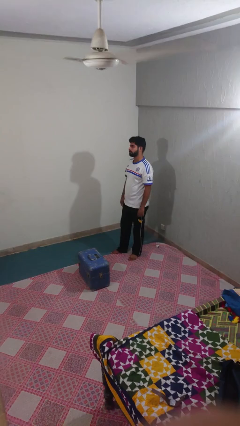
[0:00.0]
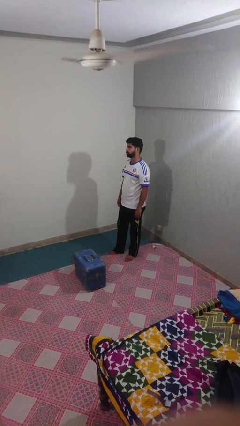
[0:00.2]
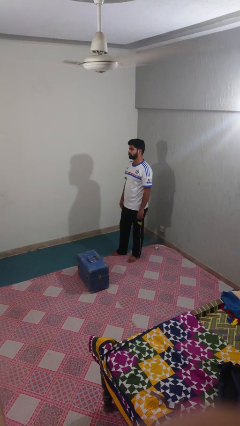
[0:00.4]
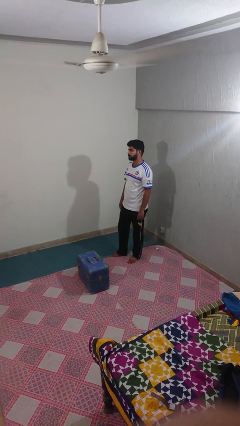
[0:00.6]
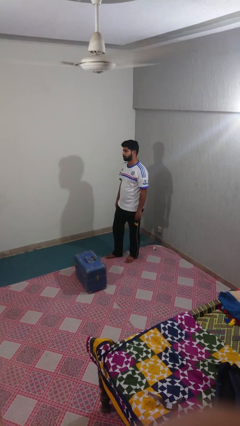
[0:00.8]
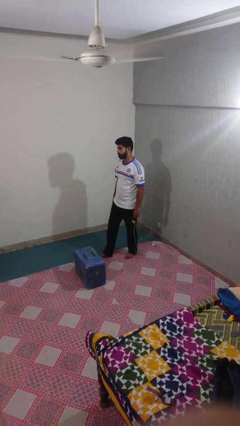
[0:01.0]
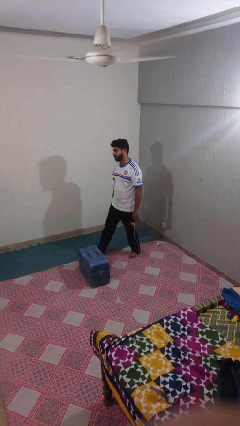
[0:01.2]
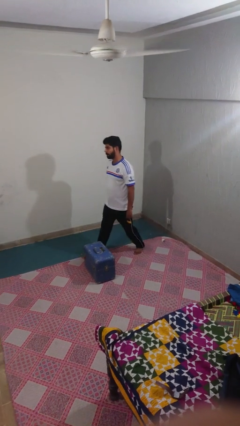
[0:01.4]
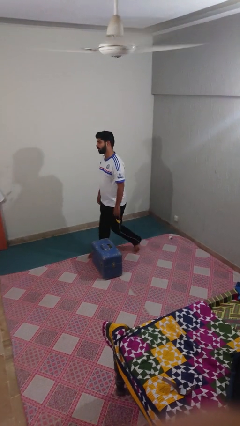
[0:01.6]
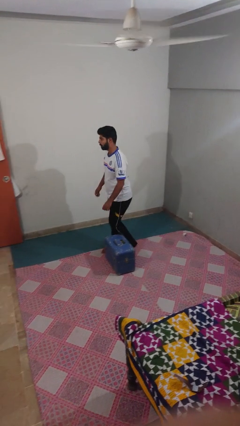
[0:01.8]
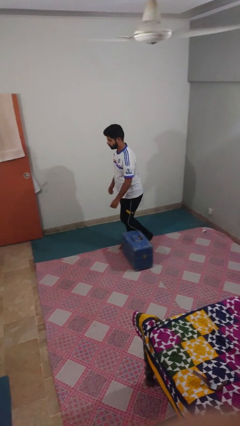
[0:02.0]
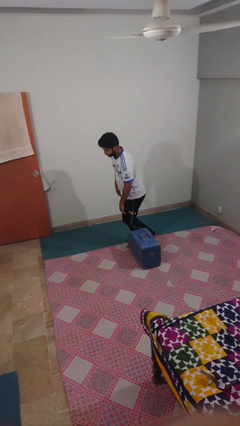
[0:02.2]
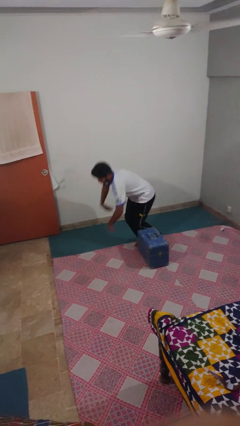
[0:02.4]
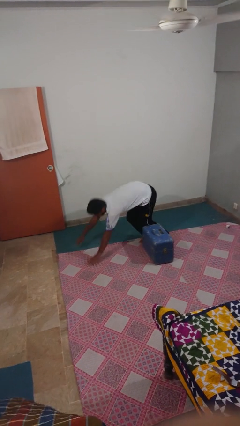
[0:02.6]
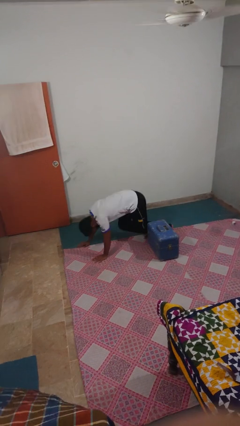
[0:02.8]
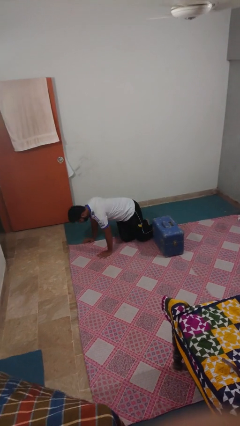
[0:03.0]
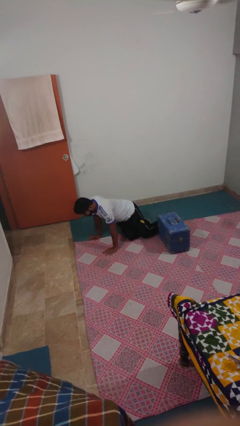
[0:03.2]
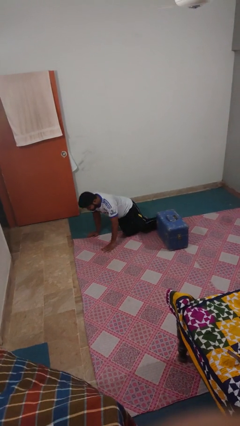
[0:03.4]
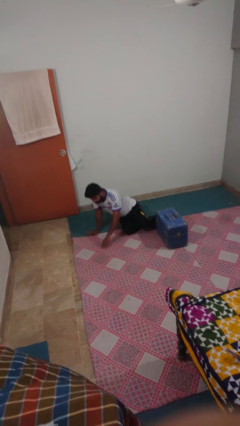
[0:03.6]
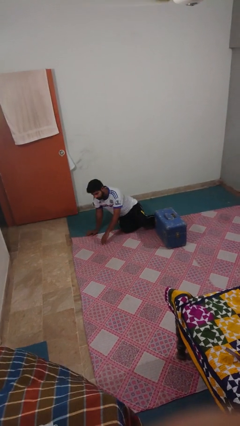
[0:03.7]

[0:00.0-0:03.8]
person trips on object on floor

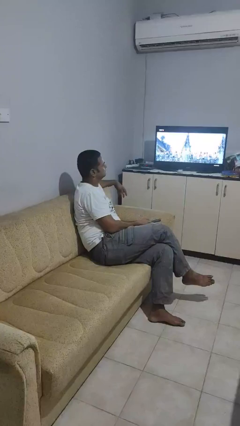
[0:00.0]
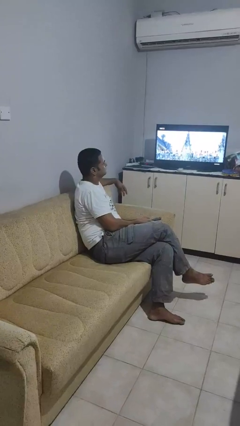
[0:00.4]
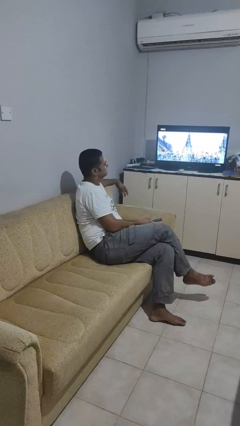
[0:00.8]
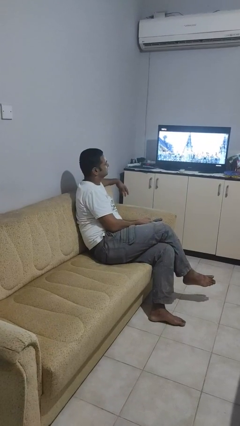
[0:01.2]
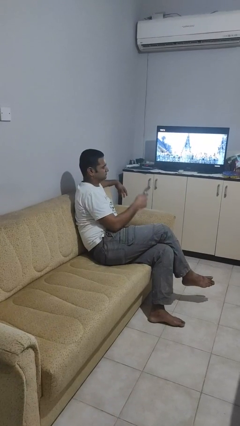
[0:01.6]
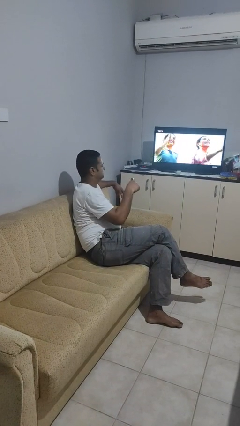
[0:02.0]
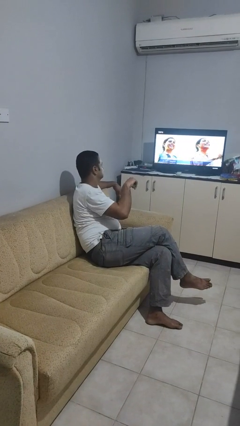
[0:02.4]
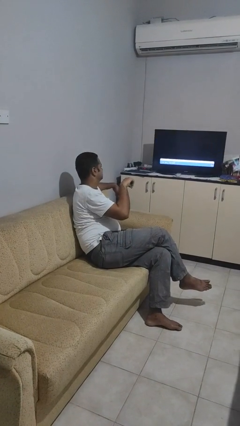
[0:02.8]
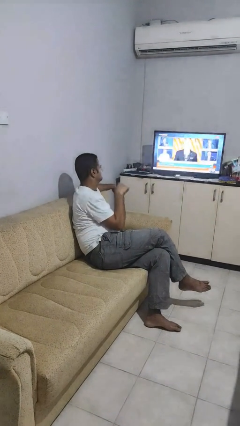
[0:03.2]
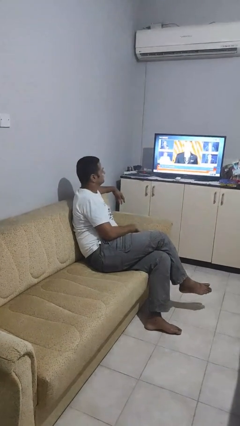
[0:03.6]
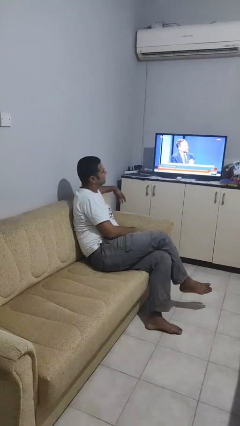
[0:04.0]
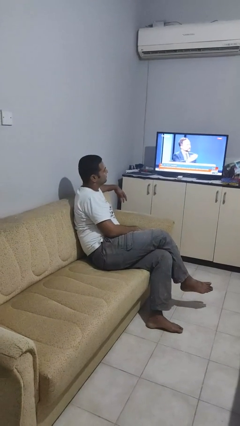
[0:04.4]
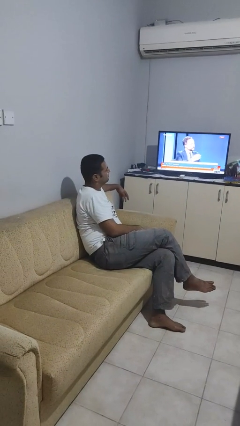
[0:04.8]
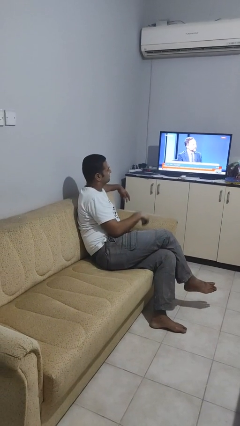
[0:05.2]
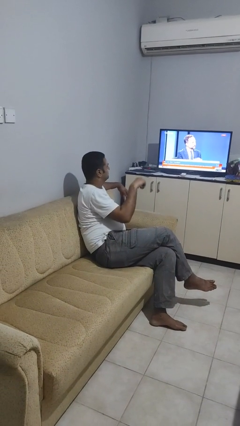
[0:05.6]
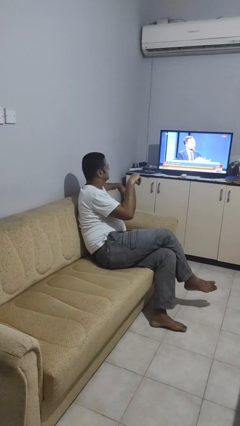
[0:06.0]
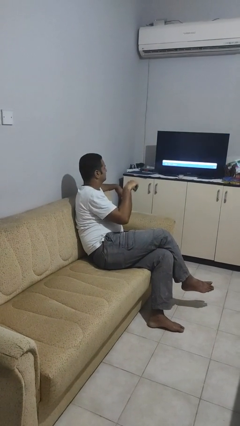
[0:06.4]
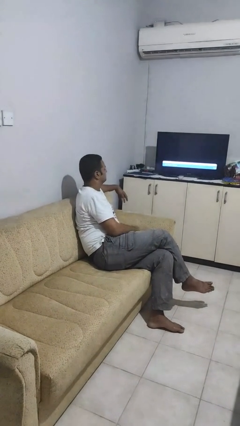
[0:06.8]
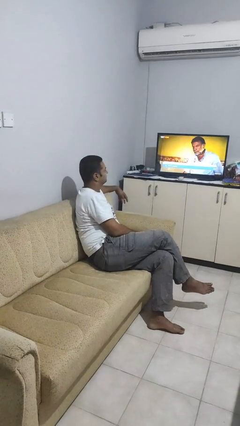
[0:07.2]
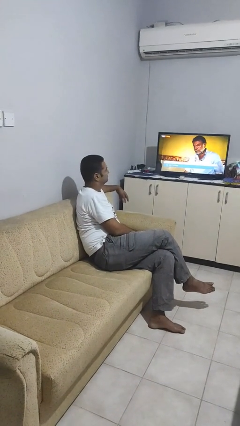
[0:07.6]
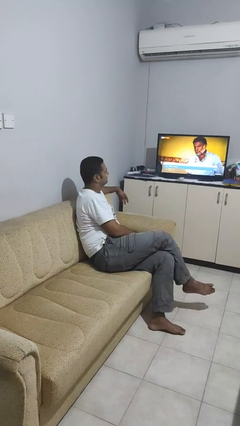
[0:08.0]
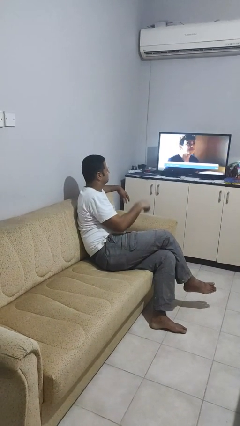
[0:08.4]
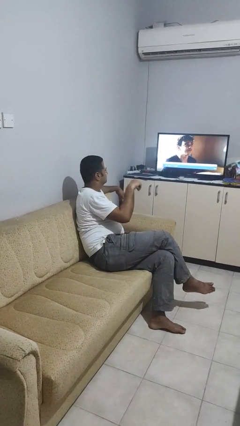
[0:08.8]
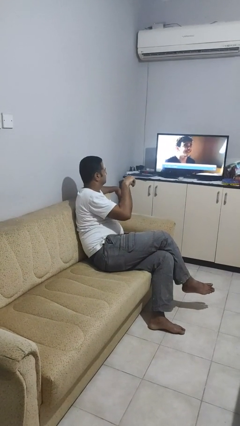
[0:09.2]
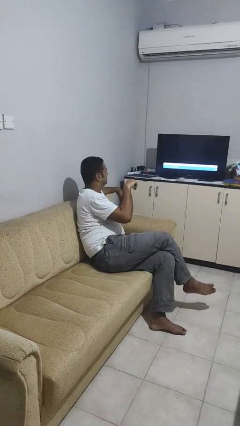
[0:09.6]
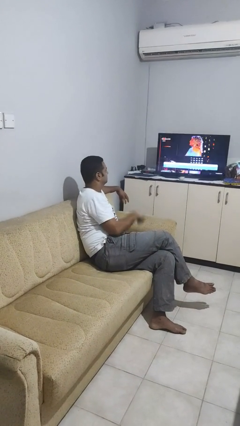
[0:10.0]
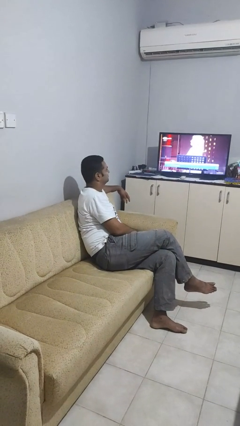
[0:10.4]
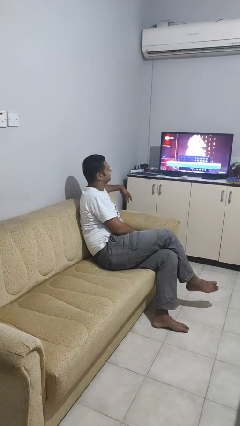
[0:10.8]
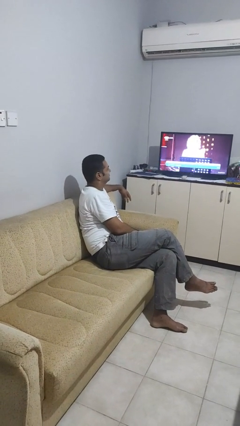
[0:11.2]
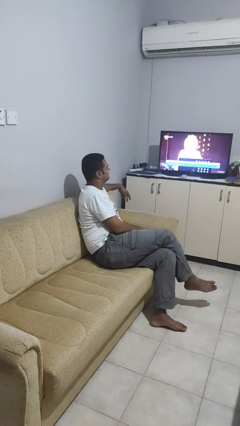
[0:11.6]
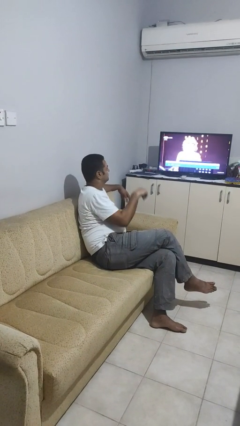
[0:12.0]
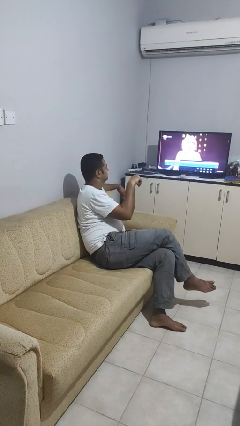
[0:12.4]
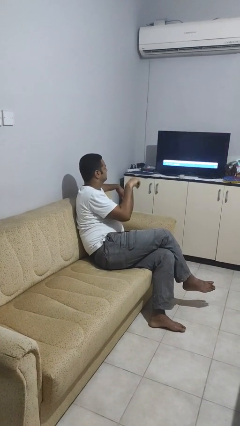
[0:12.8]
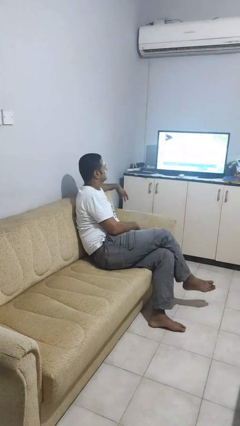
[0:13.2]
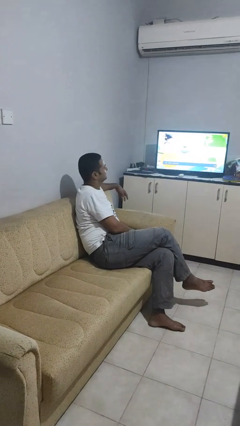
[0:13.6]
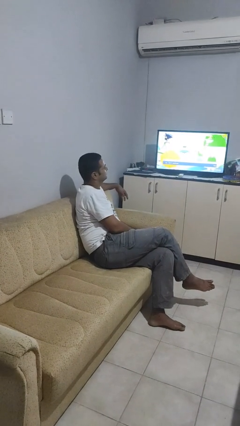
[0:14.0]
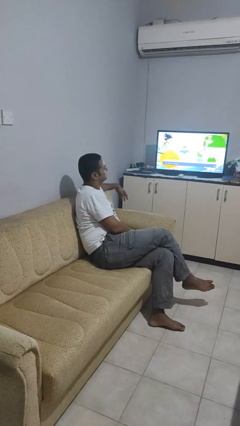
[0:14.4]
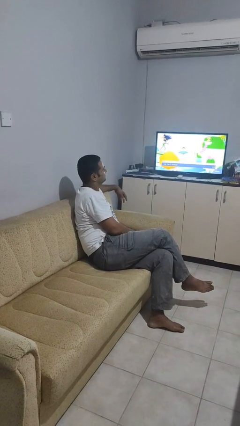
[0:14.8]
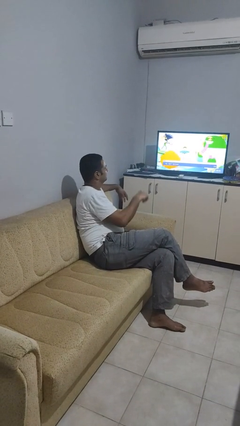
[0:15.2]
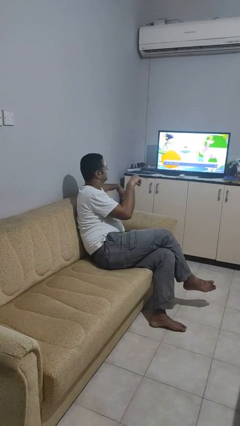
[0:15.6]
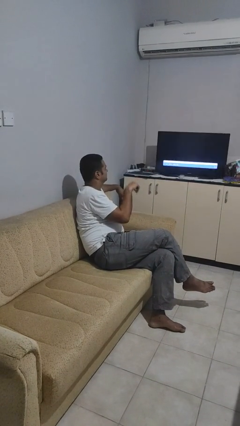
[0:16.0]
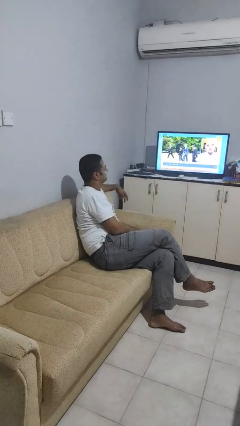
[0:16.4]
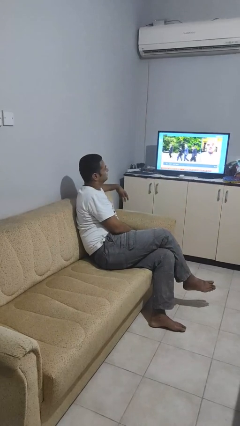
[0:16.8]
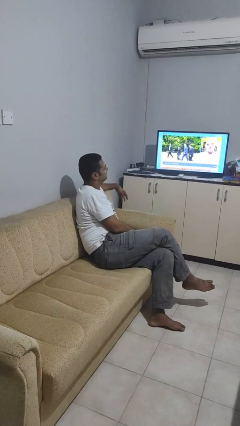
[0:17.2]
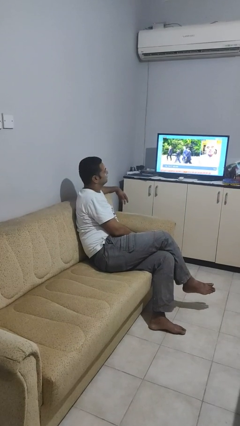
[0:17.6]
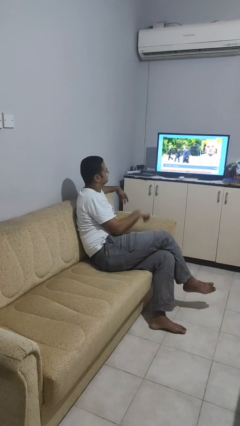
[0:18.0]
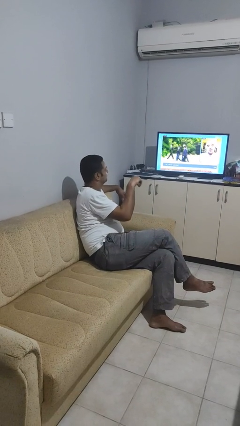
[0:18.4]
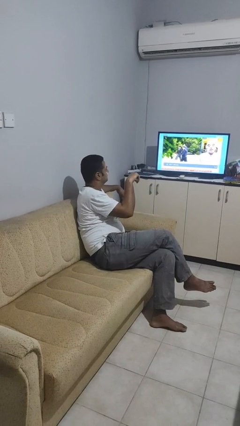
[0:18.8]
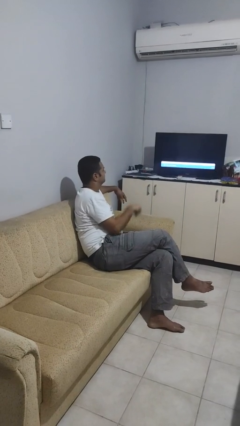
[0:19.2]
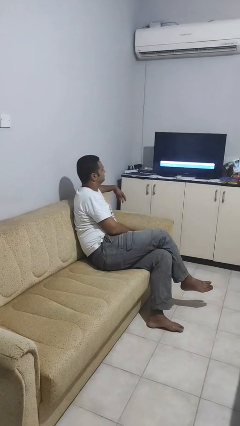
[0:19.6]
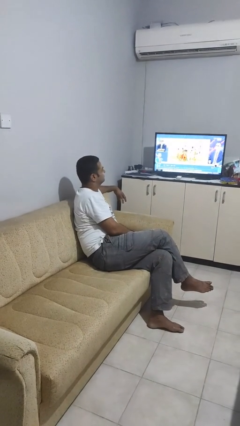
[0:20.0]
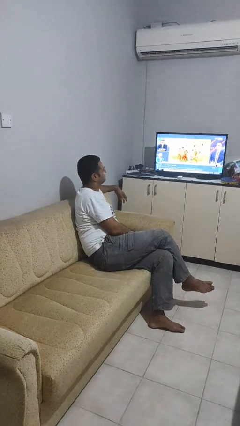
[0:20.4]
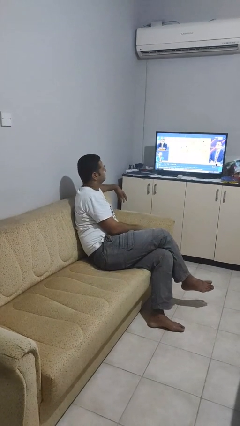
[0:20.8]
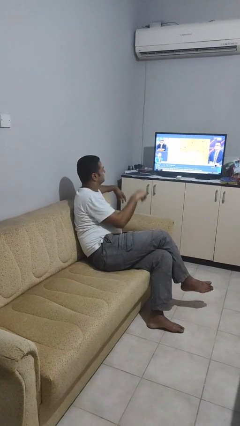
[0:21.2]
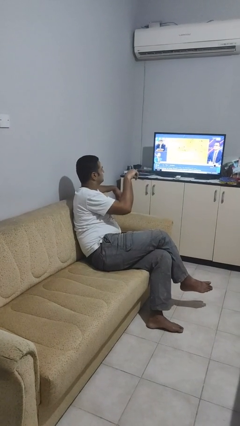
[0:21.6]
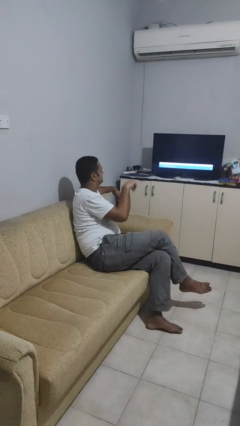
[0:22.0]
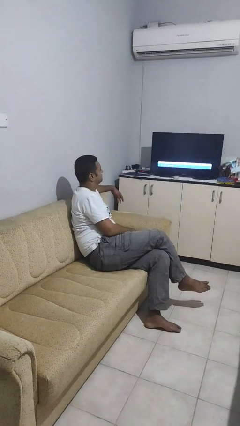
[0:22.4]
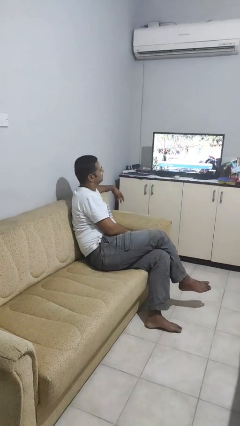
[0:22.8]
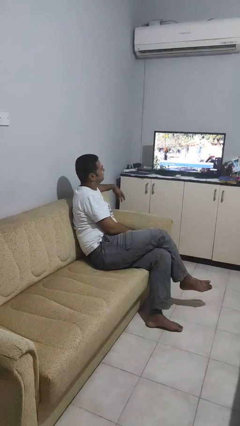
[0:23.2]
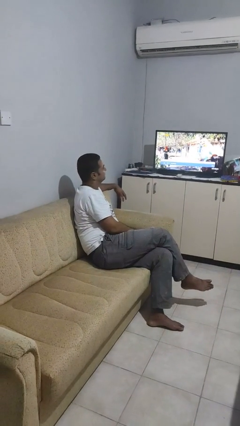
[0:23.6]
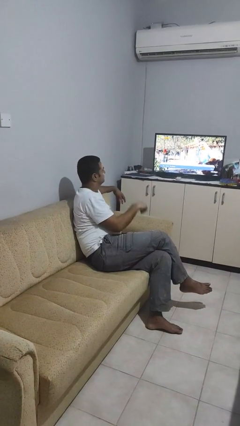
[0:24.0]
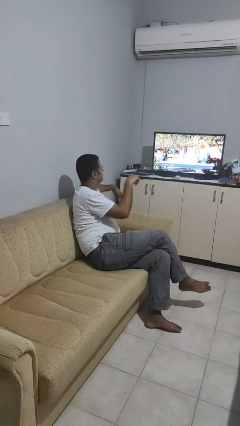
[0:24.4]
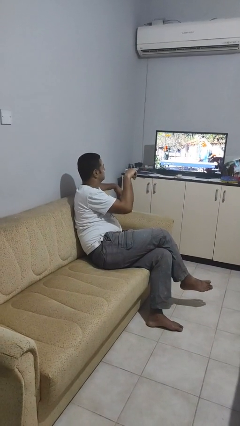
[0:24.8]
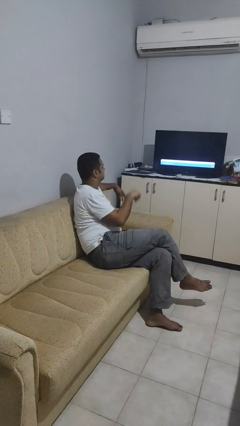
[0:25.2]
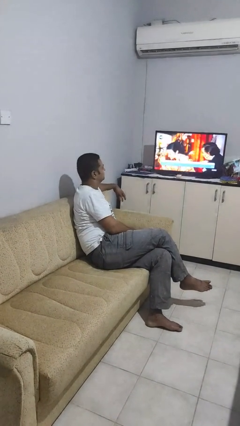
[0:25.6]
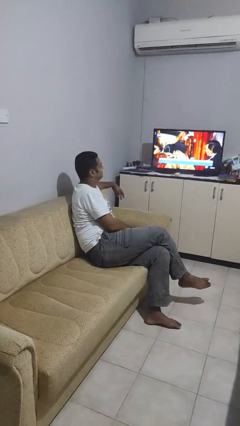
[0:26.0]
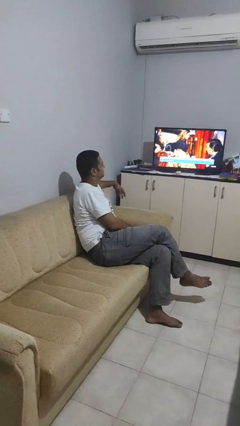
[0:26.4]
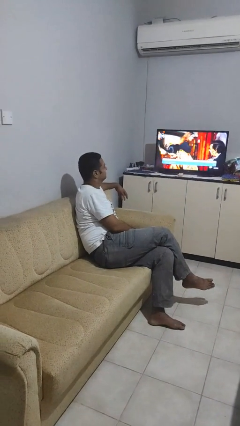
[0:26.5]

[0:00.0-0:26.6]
person uses television remote

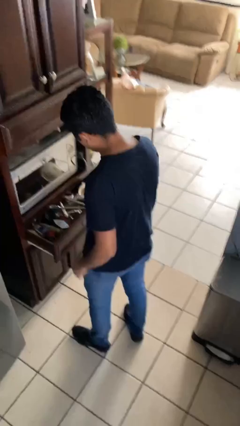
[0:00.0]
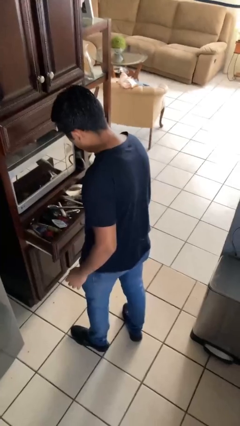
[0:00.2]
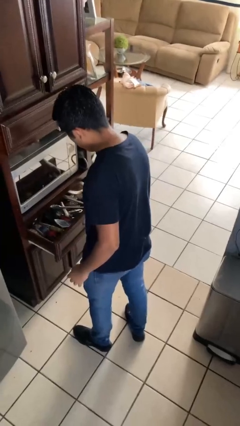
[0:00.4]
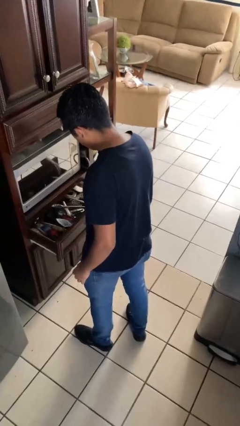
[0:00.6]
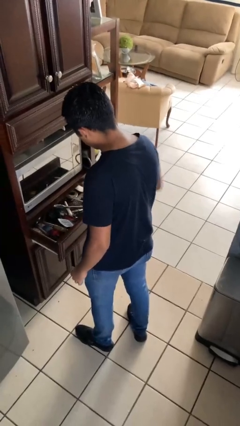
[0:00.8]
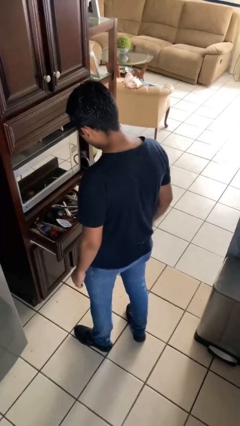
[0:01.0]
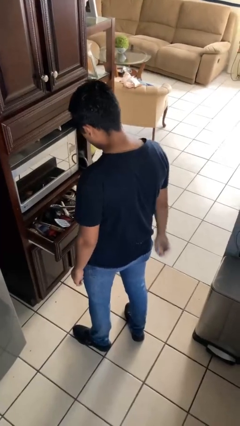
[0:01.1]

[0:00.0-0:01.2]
person puts object into kitchen drawer
